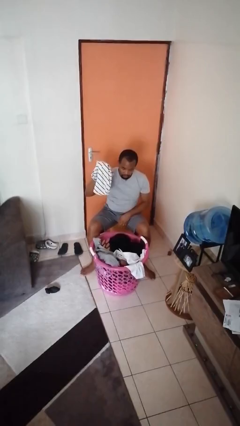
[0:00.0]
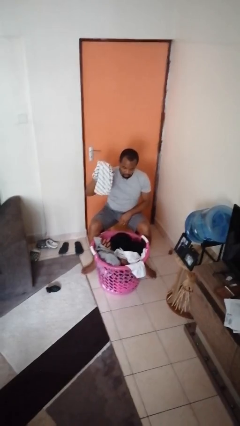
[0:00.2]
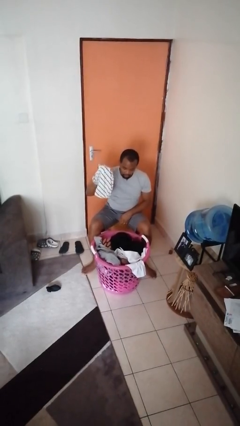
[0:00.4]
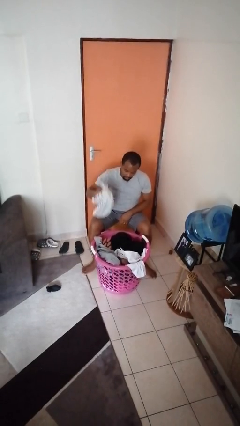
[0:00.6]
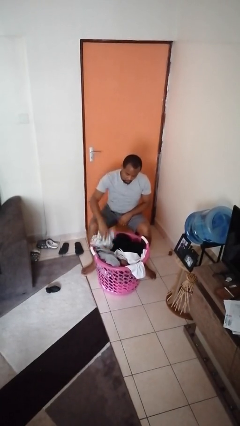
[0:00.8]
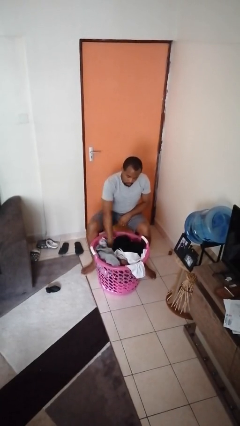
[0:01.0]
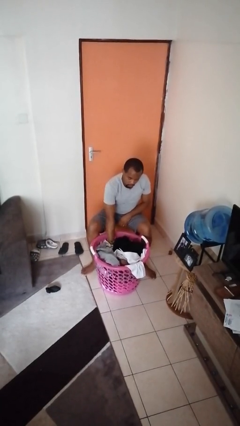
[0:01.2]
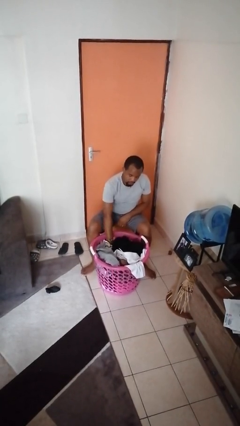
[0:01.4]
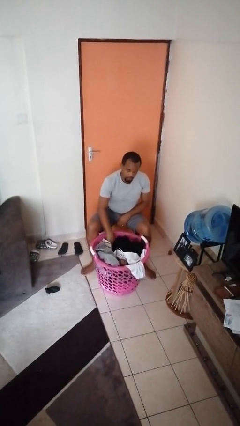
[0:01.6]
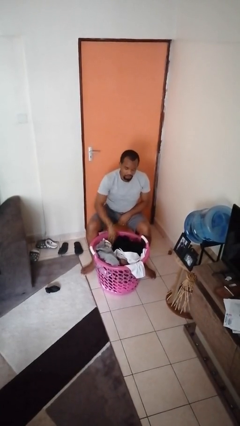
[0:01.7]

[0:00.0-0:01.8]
person puts object into basket

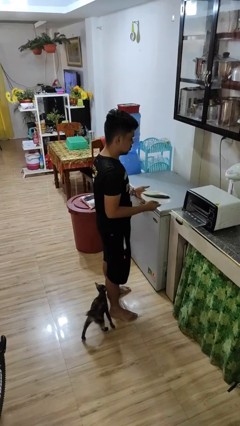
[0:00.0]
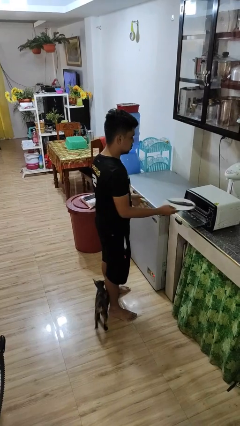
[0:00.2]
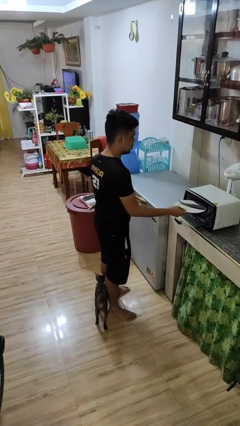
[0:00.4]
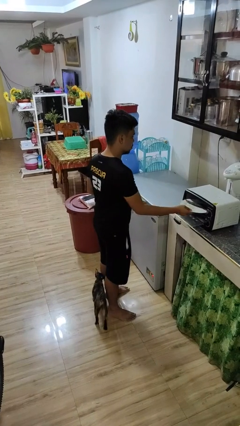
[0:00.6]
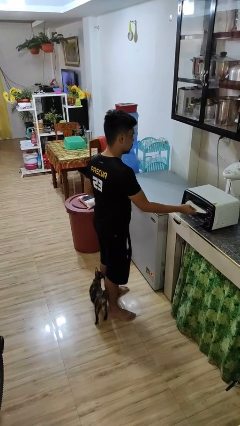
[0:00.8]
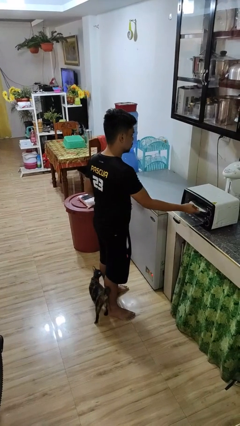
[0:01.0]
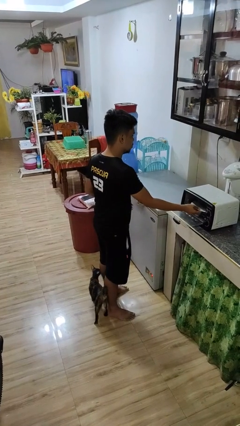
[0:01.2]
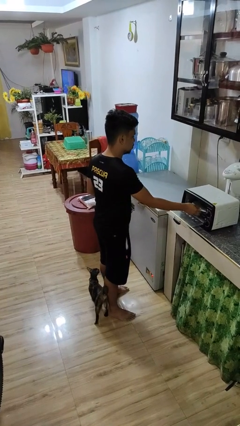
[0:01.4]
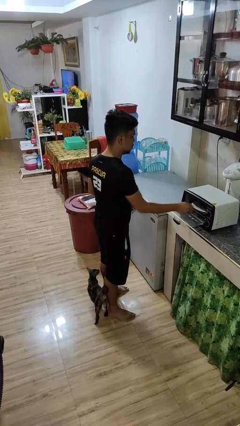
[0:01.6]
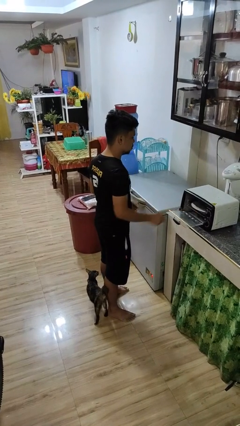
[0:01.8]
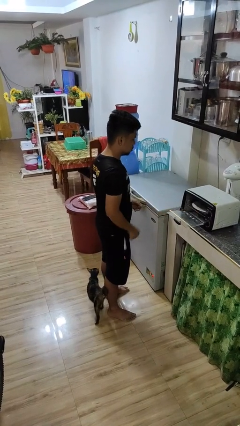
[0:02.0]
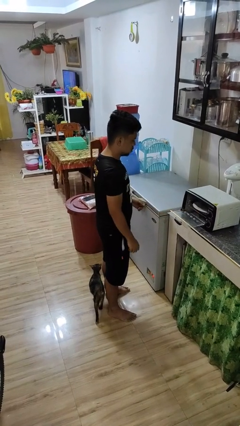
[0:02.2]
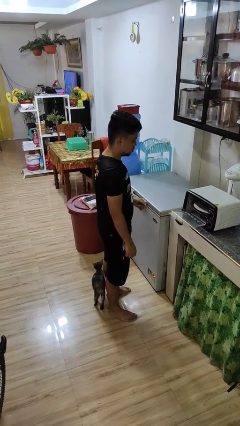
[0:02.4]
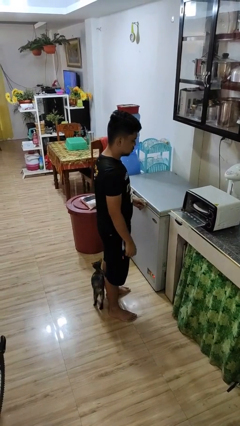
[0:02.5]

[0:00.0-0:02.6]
person puts object into microwave

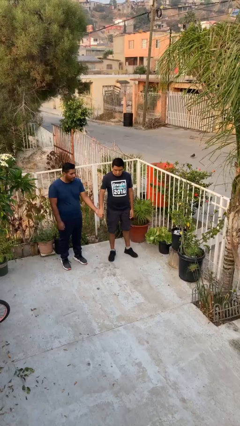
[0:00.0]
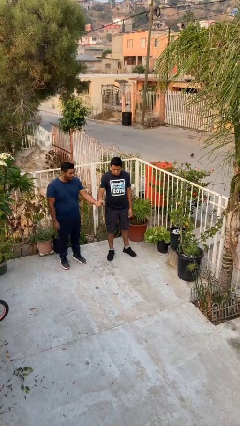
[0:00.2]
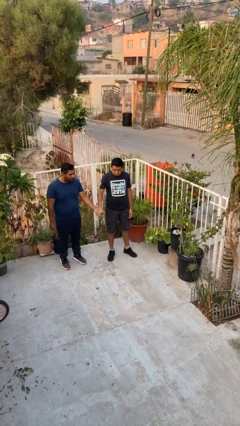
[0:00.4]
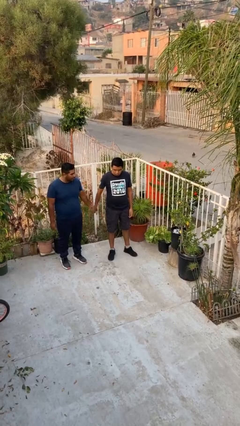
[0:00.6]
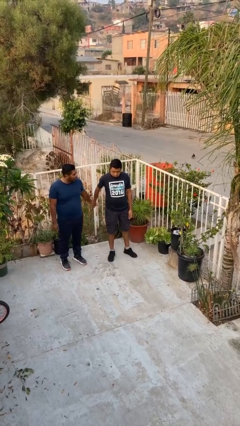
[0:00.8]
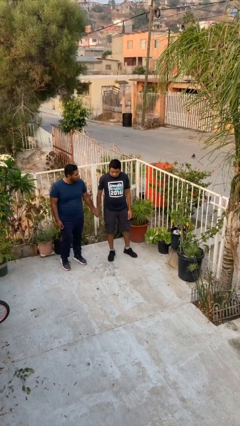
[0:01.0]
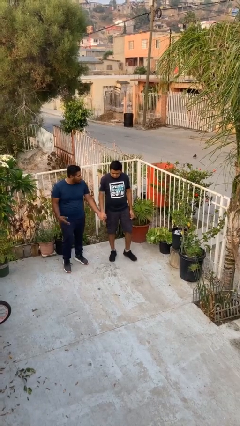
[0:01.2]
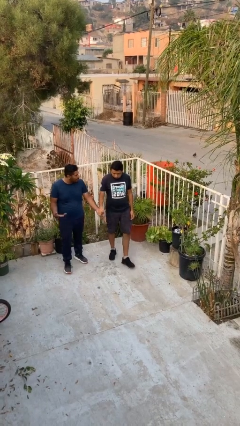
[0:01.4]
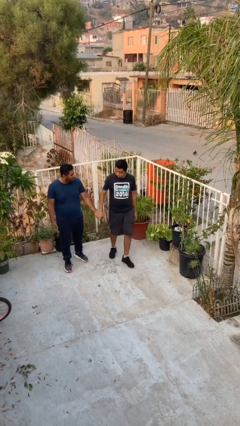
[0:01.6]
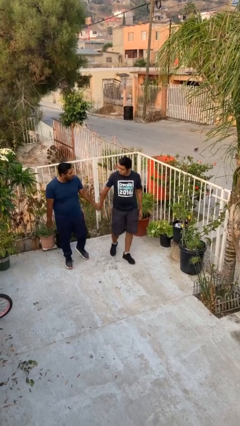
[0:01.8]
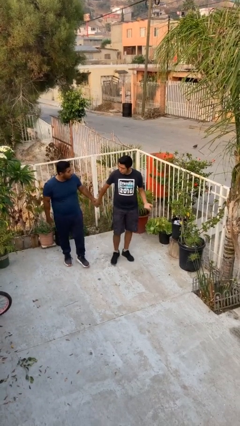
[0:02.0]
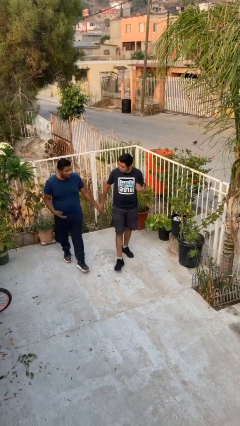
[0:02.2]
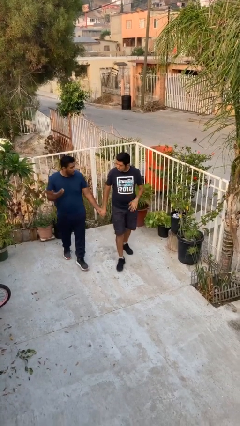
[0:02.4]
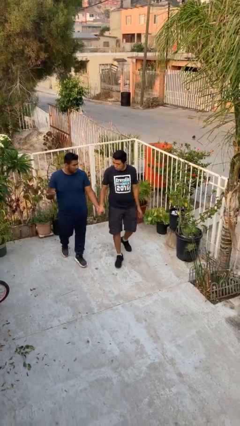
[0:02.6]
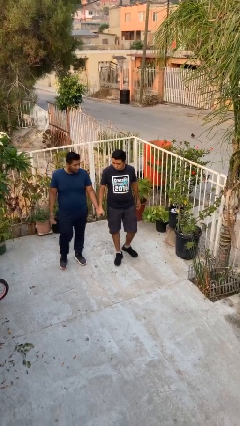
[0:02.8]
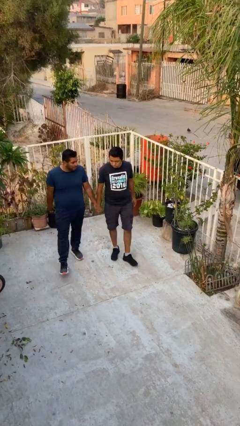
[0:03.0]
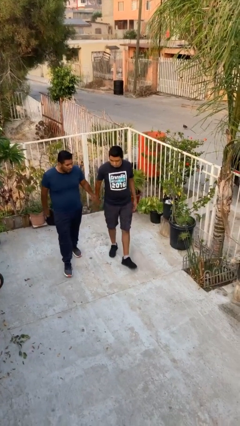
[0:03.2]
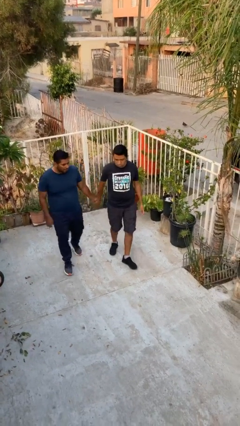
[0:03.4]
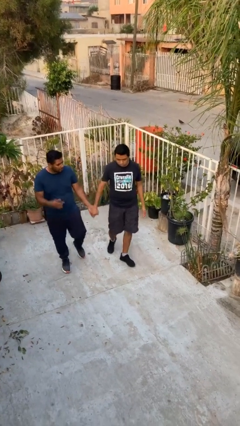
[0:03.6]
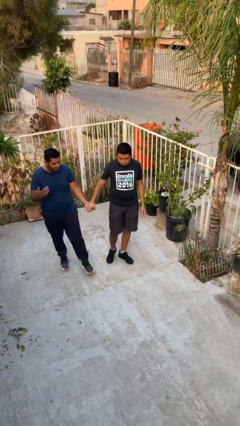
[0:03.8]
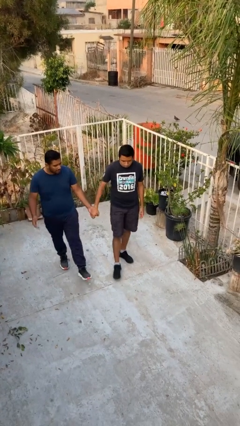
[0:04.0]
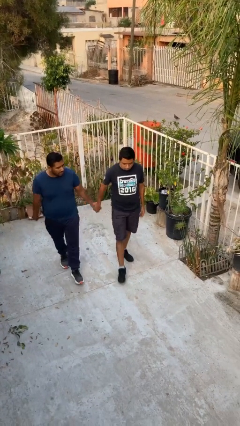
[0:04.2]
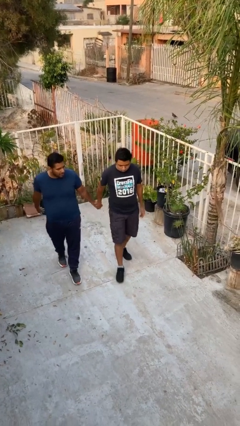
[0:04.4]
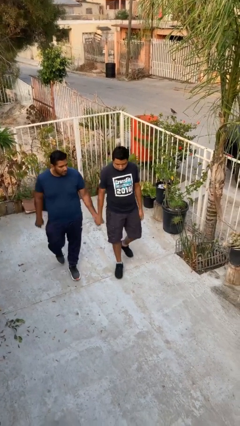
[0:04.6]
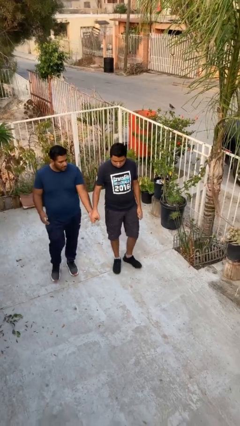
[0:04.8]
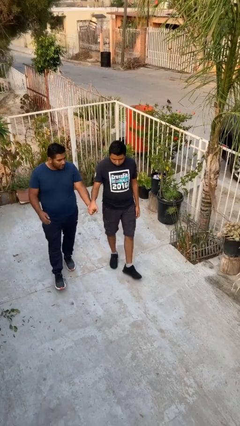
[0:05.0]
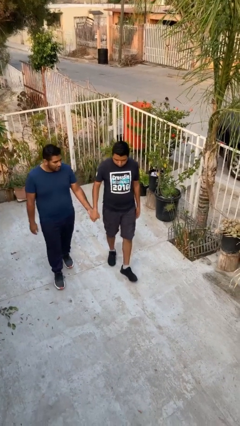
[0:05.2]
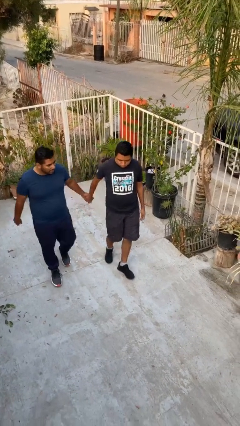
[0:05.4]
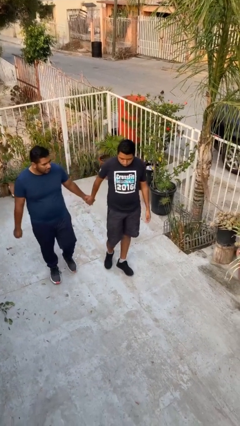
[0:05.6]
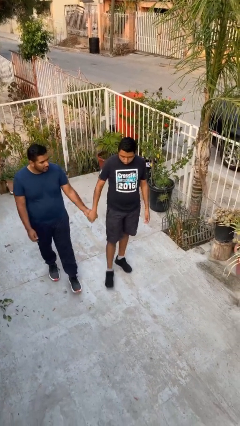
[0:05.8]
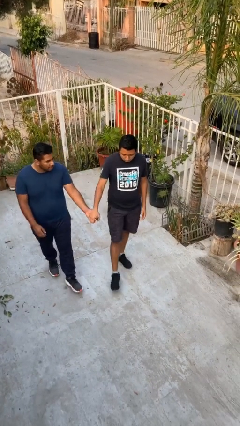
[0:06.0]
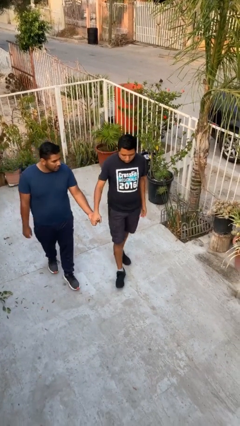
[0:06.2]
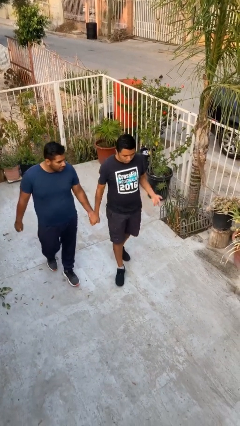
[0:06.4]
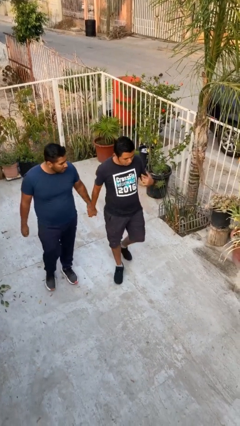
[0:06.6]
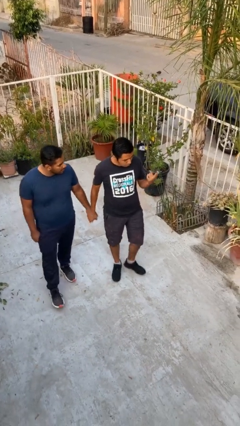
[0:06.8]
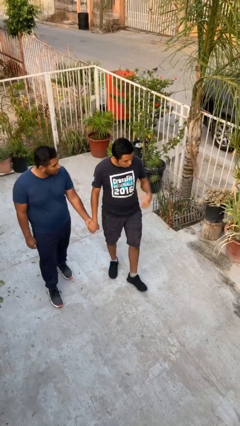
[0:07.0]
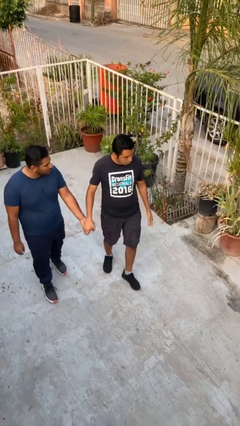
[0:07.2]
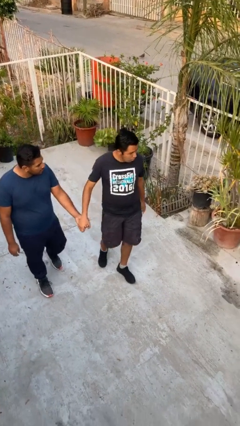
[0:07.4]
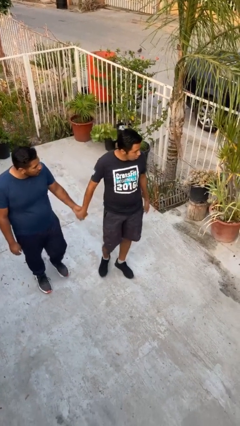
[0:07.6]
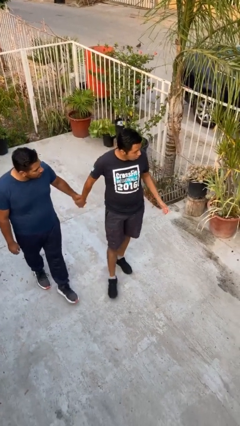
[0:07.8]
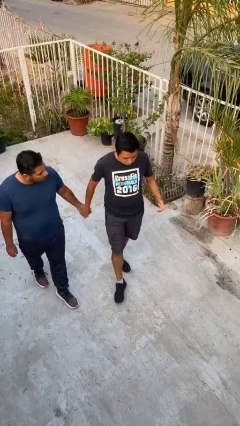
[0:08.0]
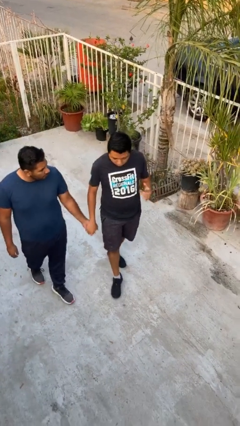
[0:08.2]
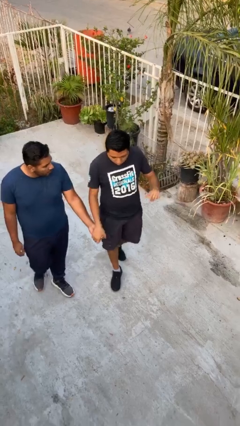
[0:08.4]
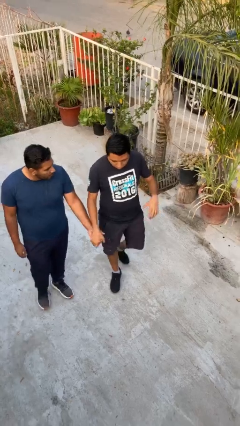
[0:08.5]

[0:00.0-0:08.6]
person holds hand

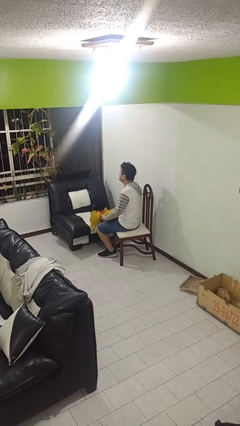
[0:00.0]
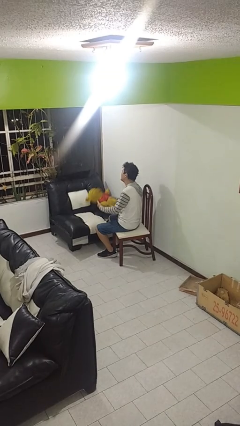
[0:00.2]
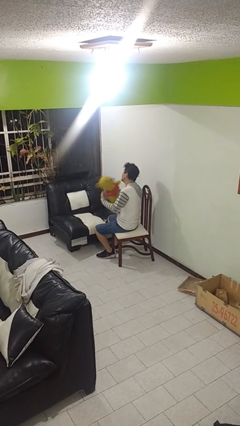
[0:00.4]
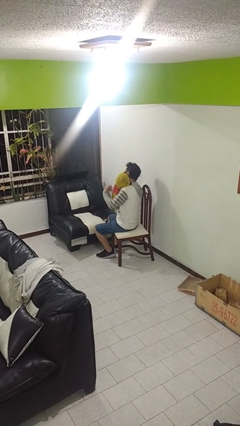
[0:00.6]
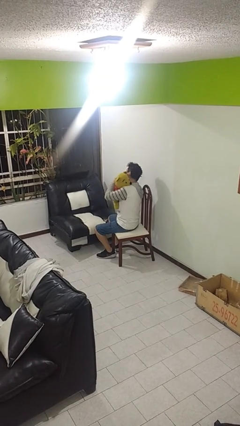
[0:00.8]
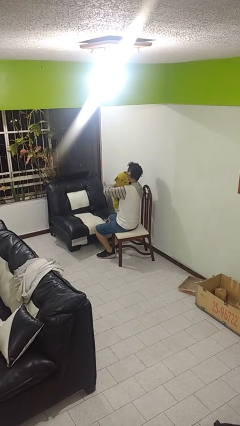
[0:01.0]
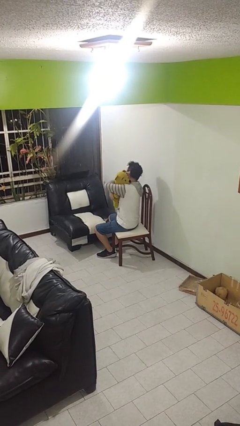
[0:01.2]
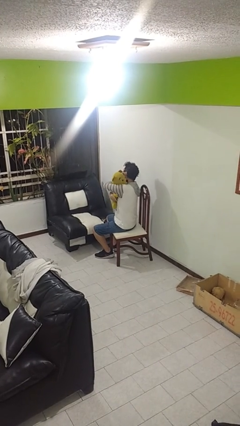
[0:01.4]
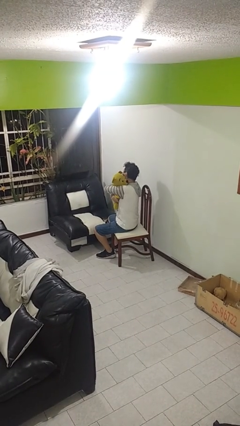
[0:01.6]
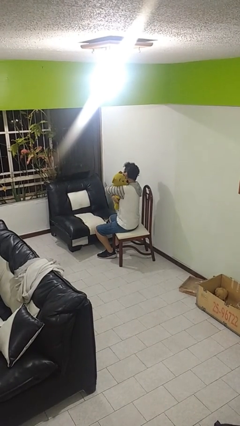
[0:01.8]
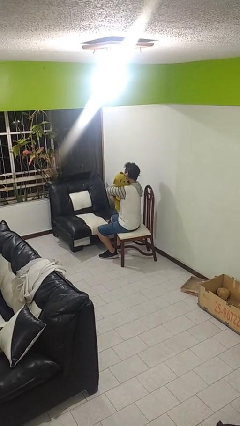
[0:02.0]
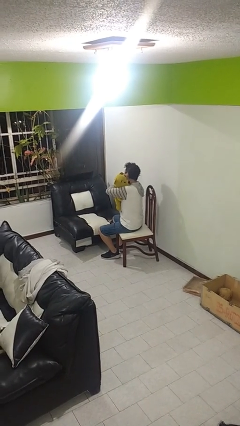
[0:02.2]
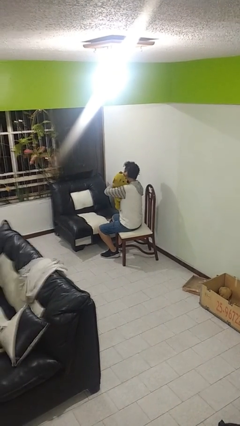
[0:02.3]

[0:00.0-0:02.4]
person hugs stuffed animal

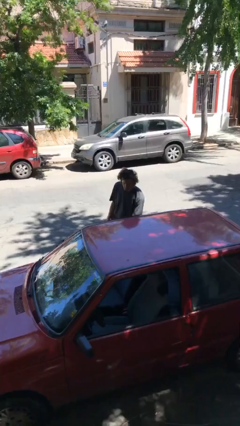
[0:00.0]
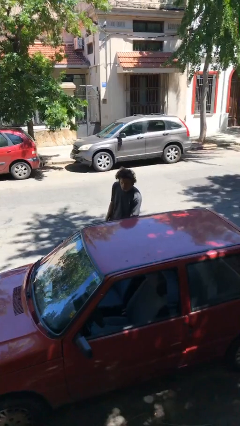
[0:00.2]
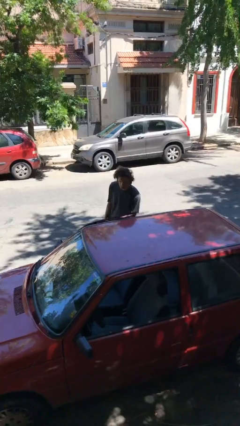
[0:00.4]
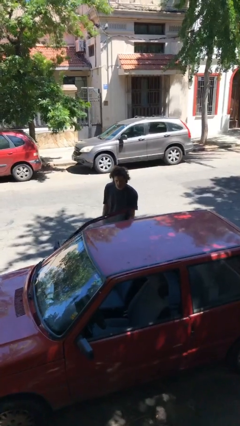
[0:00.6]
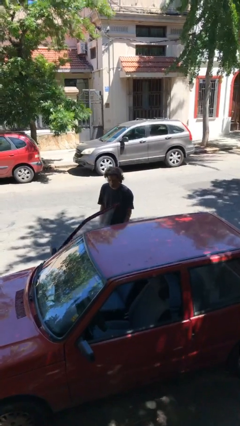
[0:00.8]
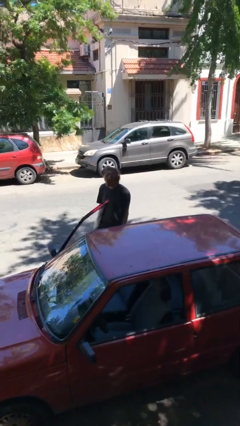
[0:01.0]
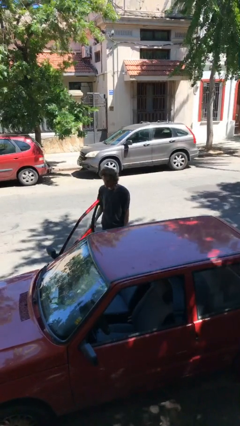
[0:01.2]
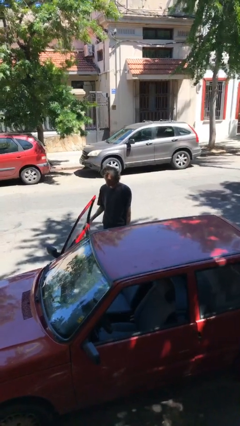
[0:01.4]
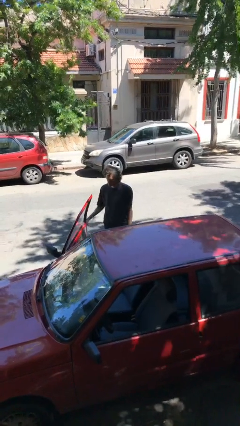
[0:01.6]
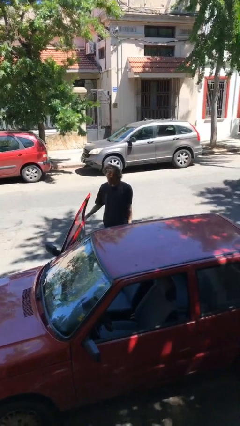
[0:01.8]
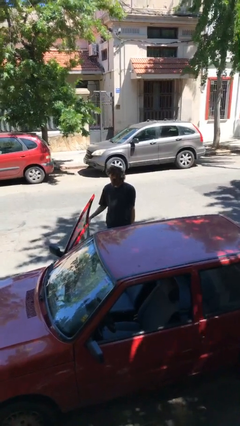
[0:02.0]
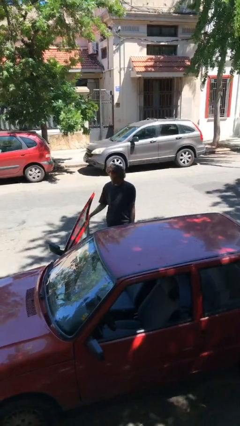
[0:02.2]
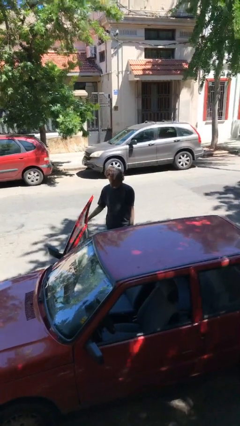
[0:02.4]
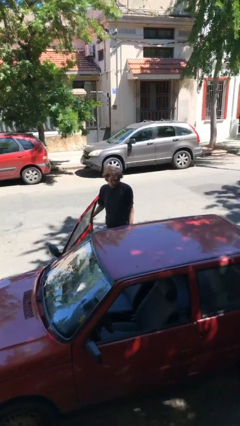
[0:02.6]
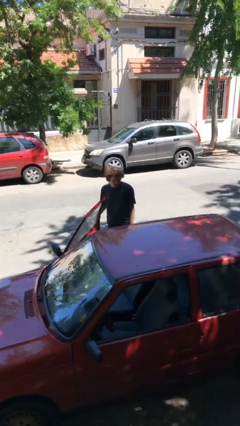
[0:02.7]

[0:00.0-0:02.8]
person opens car door
